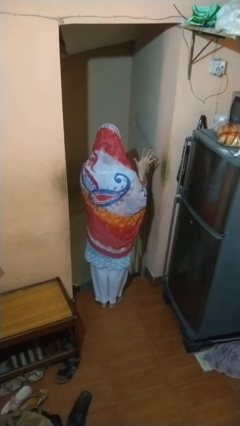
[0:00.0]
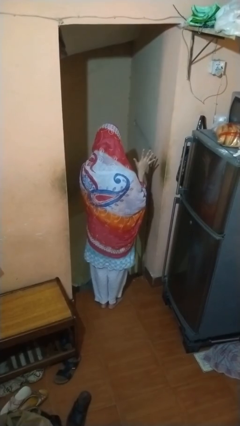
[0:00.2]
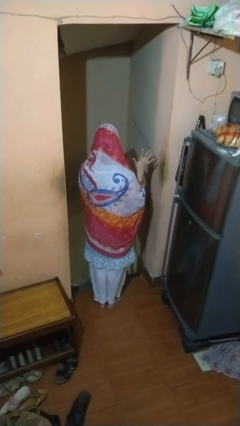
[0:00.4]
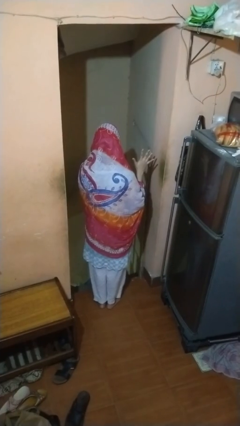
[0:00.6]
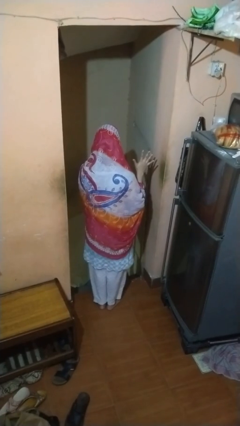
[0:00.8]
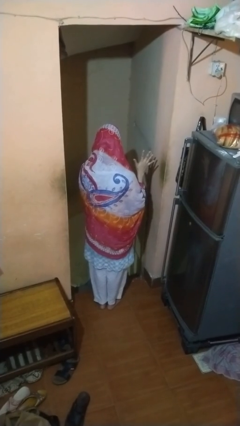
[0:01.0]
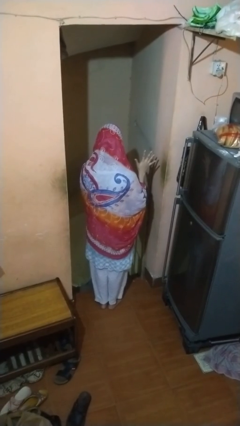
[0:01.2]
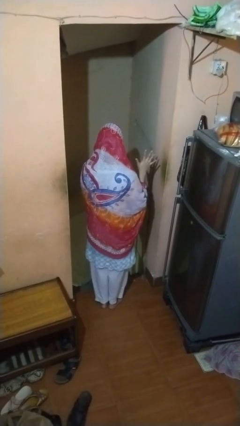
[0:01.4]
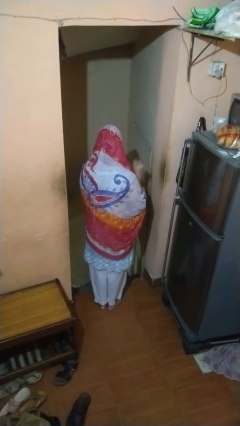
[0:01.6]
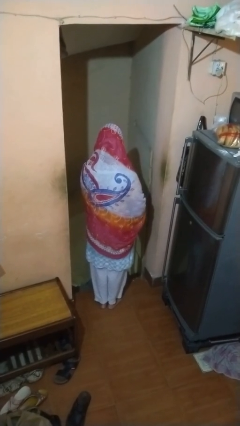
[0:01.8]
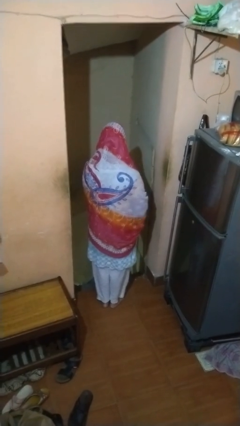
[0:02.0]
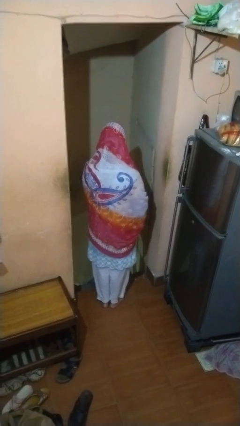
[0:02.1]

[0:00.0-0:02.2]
person gestures number five

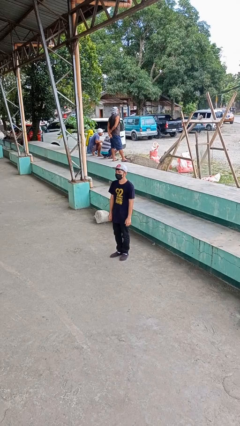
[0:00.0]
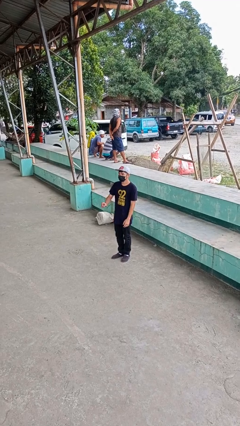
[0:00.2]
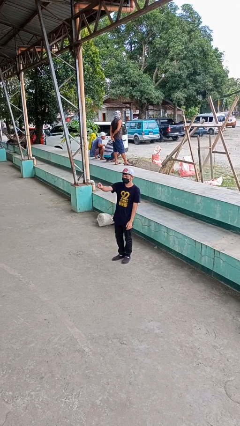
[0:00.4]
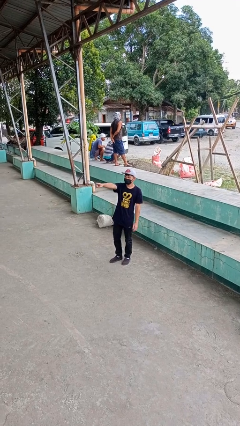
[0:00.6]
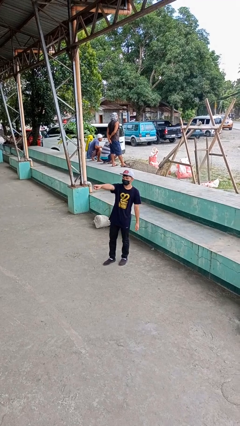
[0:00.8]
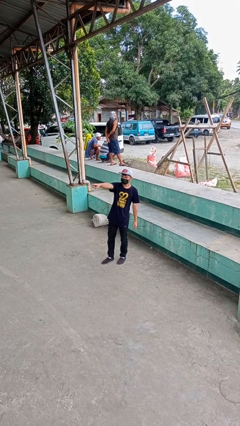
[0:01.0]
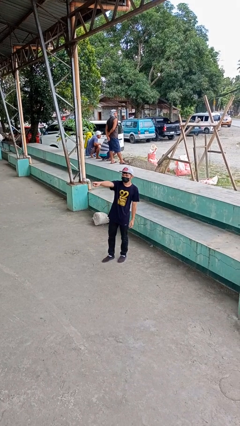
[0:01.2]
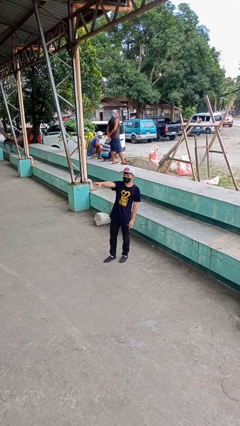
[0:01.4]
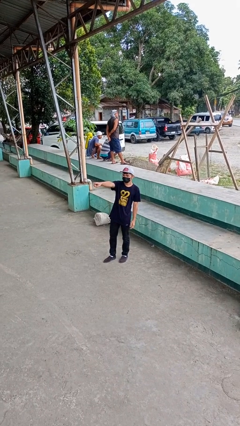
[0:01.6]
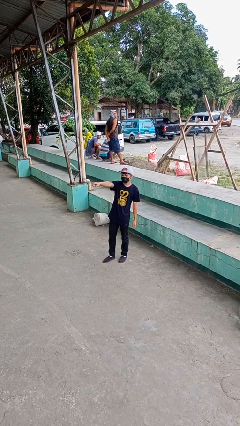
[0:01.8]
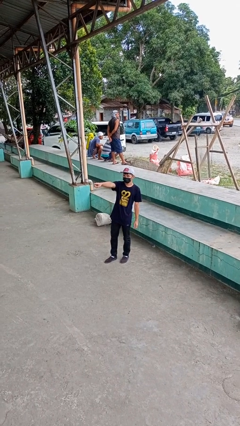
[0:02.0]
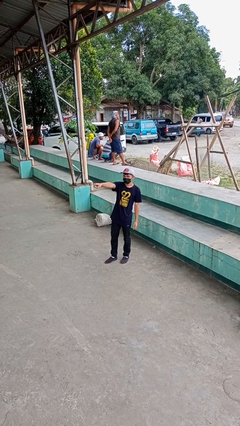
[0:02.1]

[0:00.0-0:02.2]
person points at person

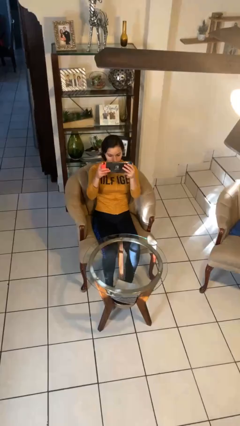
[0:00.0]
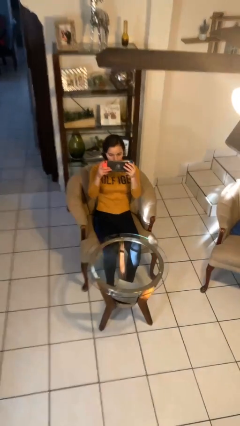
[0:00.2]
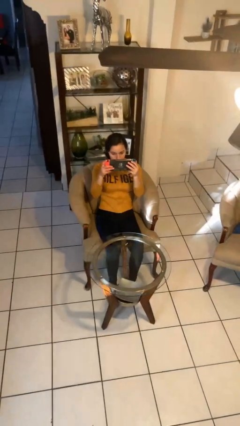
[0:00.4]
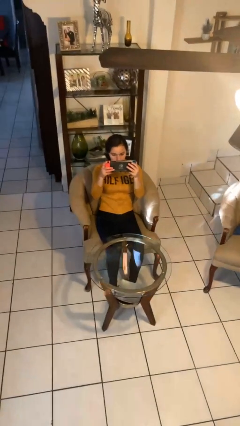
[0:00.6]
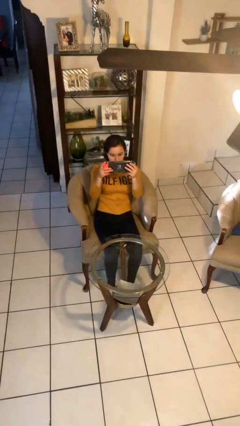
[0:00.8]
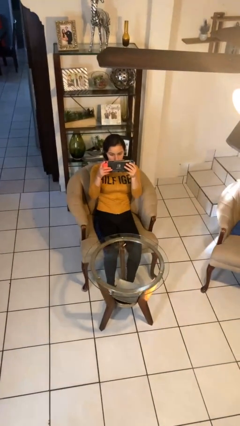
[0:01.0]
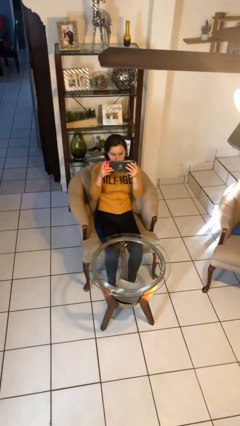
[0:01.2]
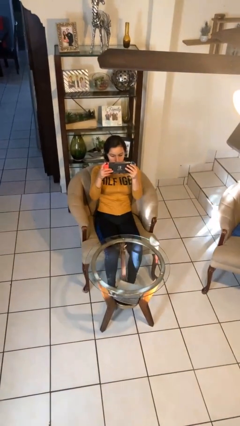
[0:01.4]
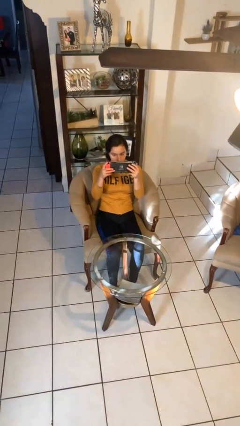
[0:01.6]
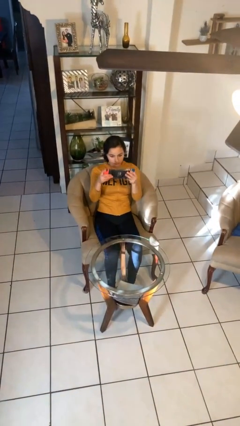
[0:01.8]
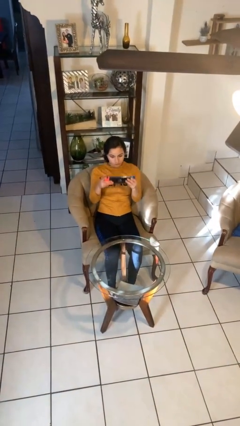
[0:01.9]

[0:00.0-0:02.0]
person interacts with handheld game

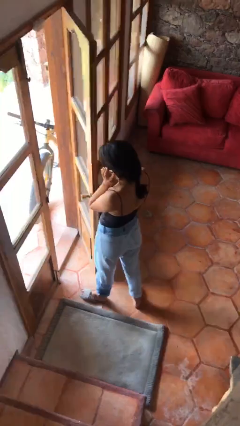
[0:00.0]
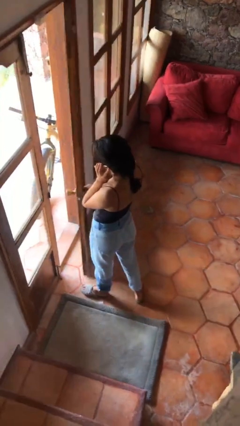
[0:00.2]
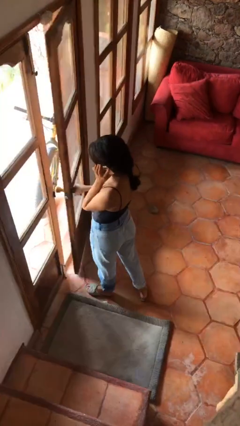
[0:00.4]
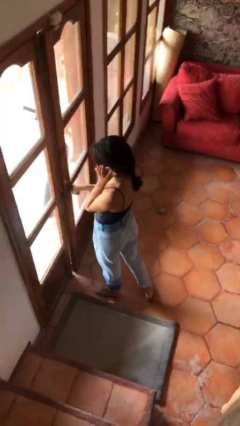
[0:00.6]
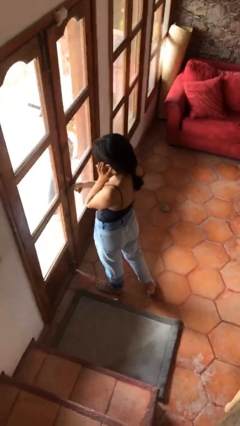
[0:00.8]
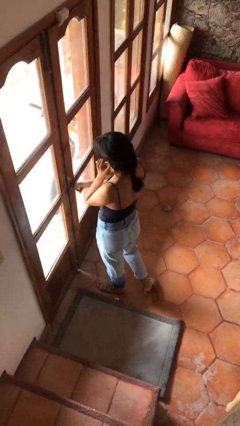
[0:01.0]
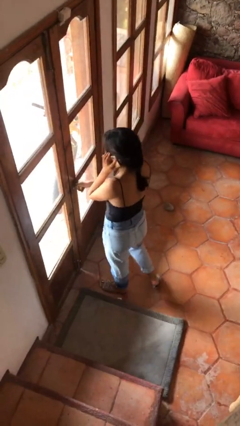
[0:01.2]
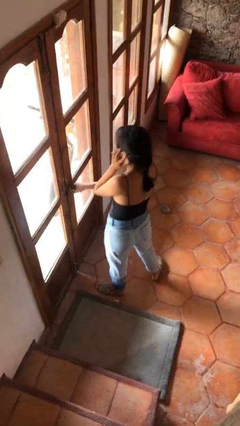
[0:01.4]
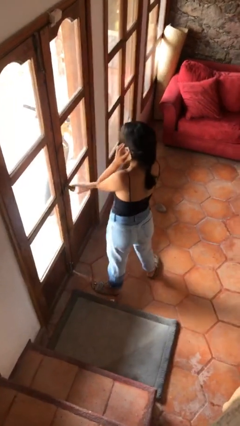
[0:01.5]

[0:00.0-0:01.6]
person closes facility door

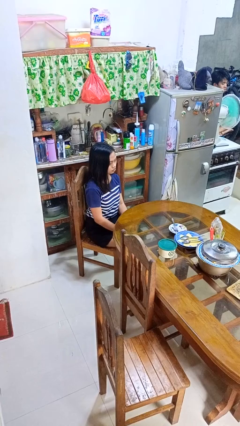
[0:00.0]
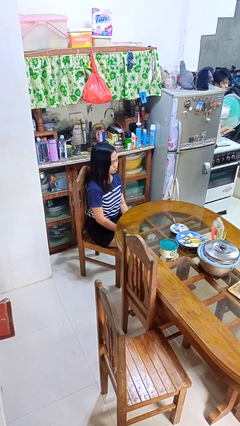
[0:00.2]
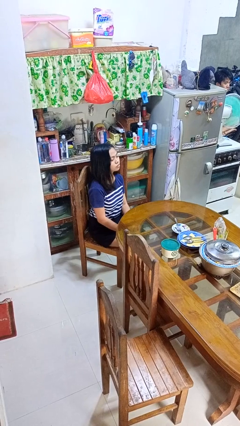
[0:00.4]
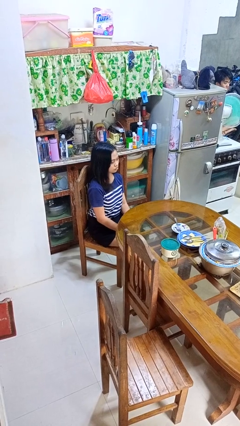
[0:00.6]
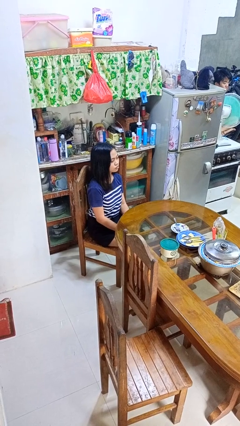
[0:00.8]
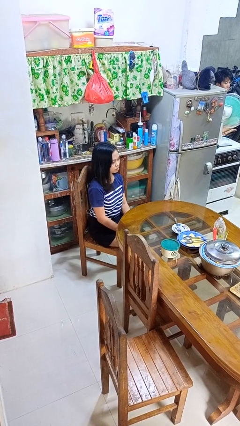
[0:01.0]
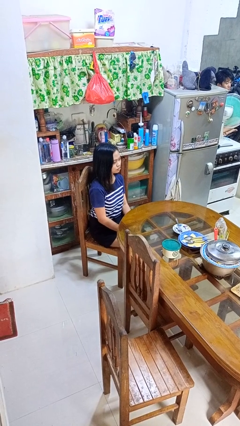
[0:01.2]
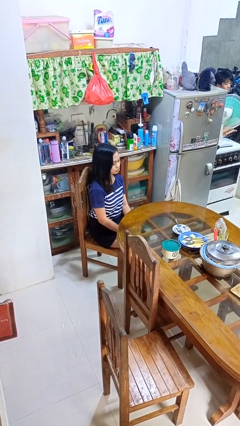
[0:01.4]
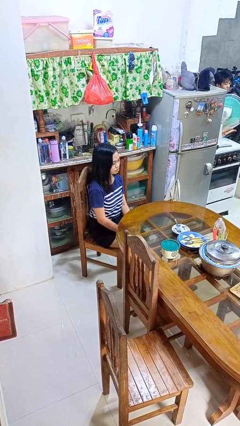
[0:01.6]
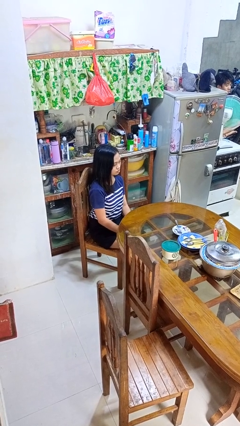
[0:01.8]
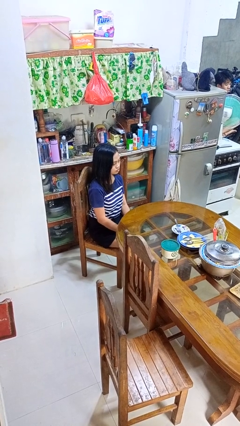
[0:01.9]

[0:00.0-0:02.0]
person nods head

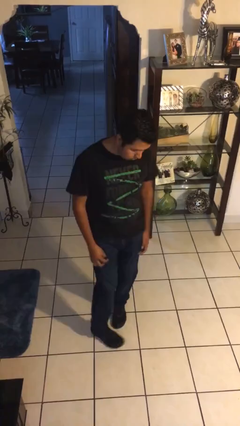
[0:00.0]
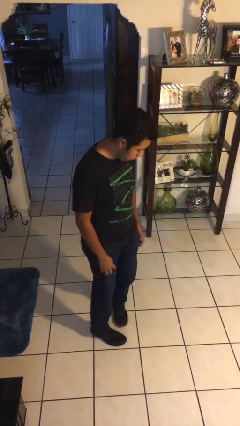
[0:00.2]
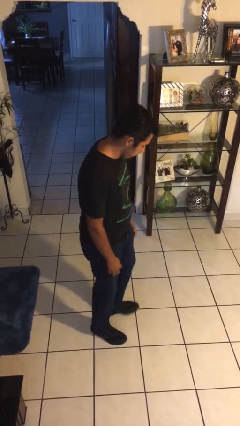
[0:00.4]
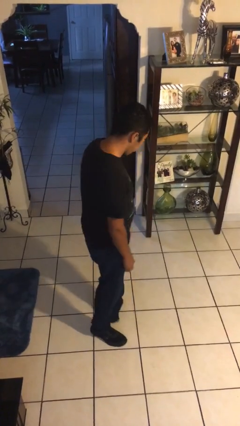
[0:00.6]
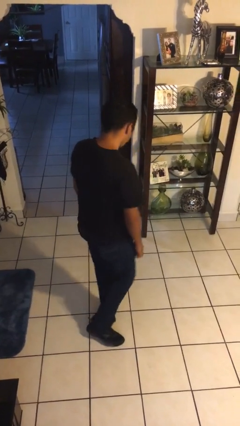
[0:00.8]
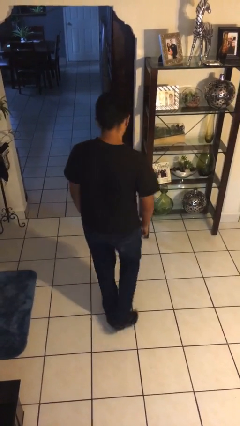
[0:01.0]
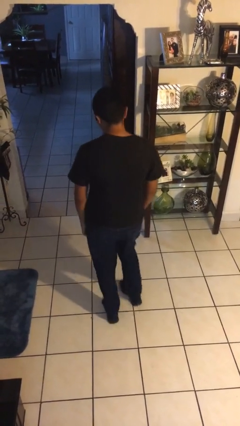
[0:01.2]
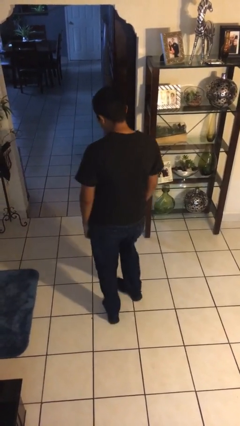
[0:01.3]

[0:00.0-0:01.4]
person twirls

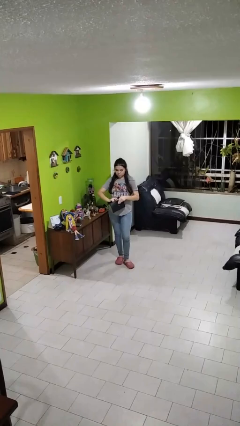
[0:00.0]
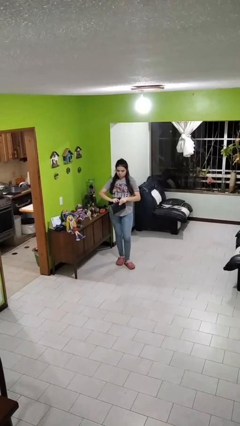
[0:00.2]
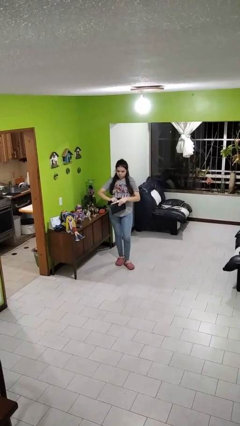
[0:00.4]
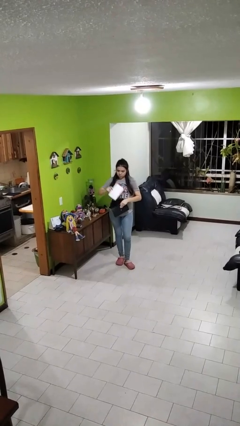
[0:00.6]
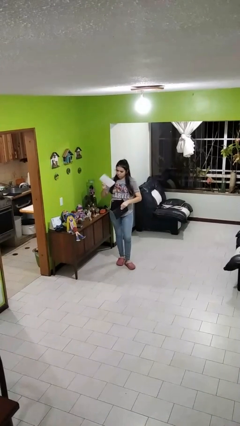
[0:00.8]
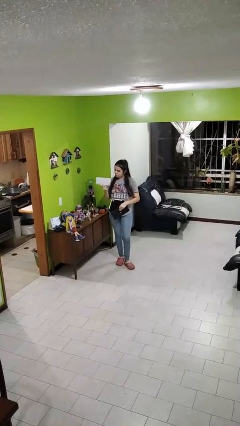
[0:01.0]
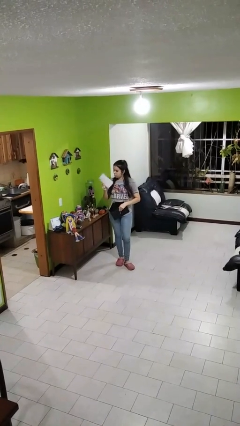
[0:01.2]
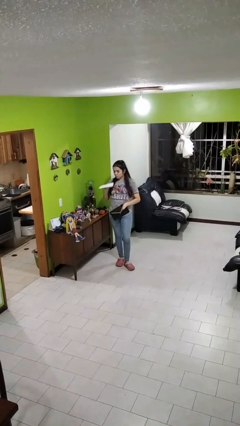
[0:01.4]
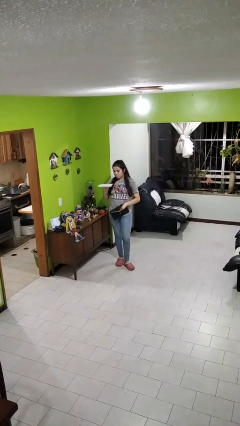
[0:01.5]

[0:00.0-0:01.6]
person takes object from purse

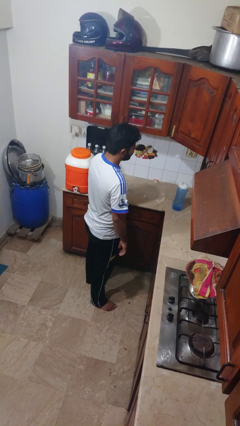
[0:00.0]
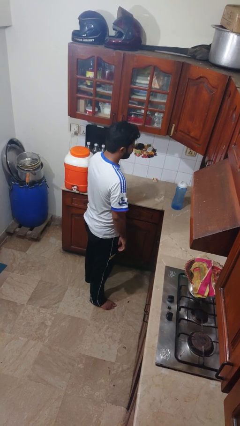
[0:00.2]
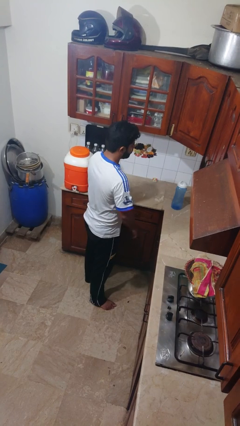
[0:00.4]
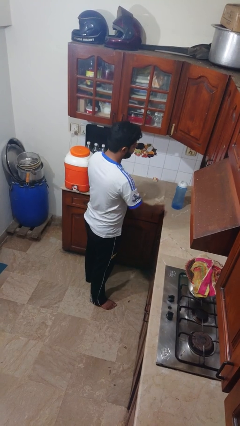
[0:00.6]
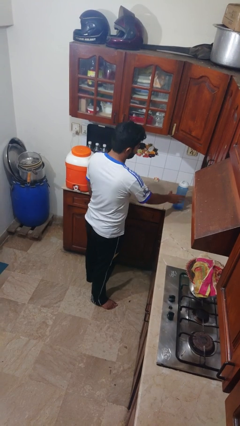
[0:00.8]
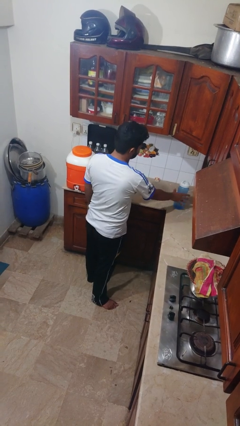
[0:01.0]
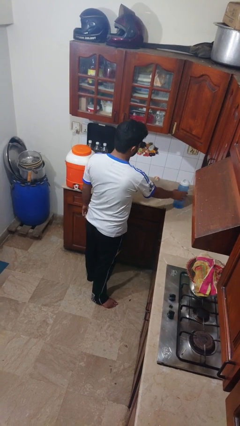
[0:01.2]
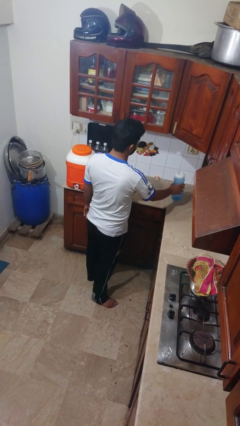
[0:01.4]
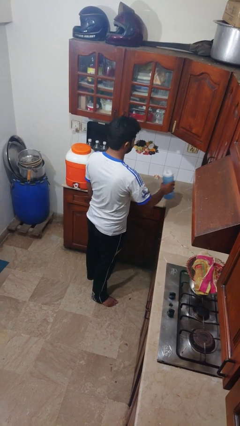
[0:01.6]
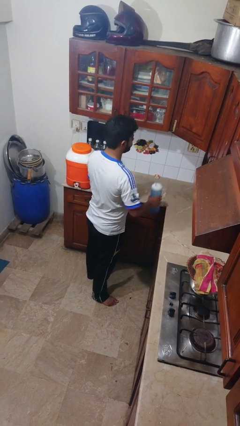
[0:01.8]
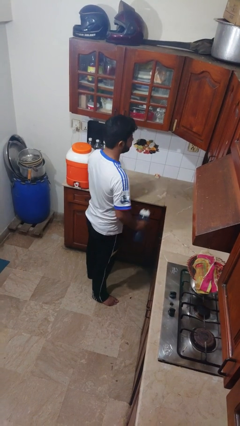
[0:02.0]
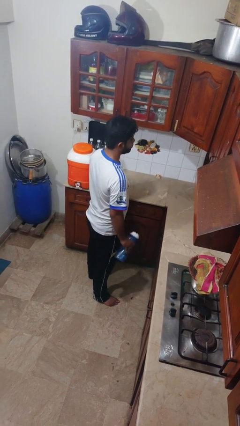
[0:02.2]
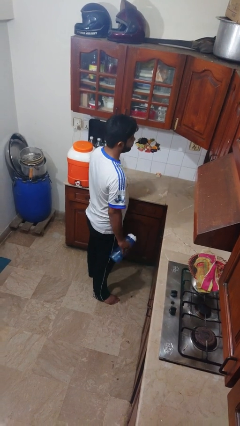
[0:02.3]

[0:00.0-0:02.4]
person picks up object from countertop

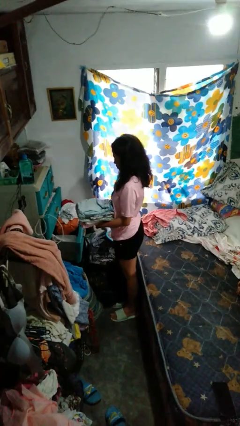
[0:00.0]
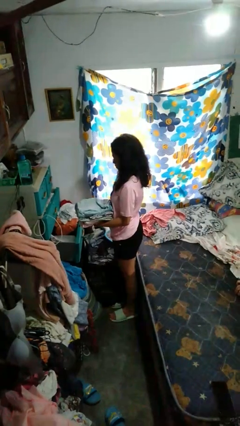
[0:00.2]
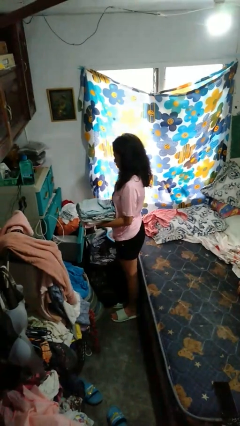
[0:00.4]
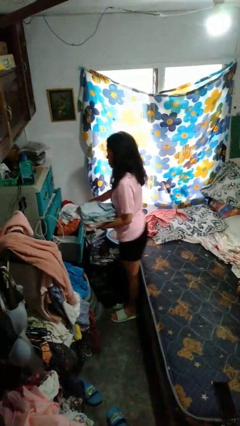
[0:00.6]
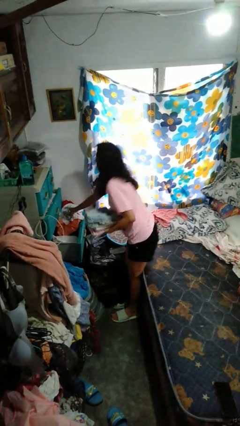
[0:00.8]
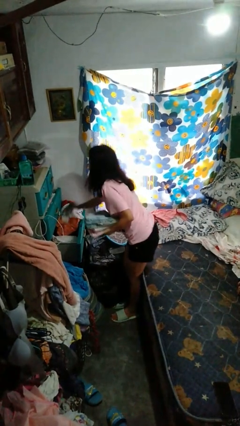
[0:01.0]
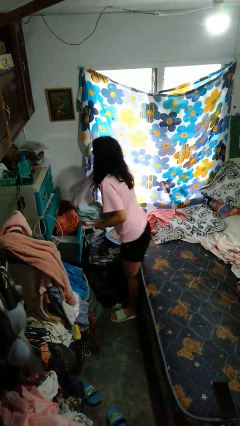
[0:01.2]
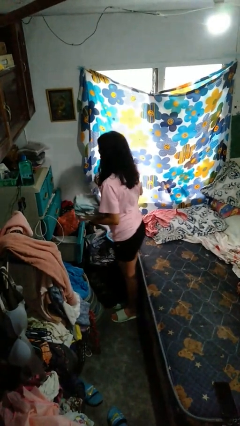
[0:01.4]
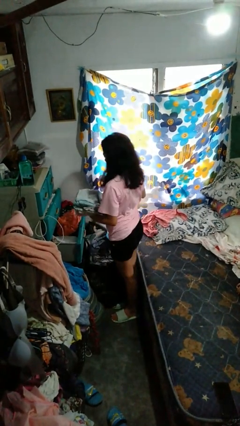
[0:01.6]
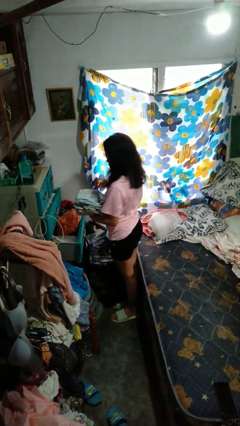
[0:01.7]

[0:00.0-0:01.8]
person takes clothes from dresser
